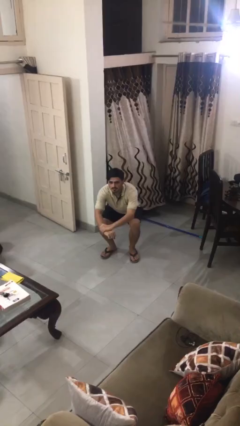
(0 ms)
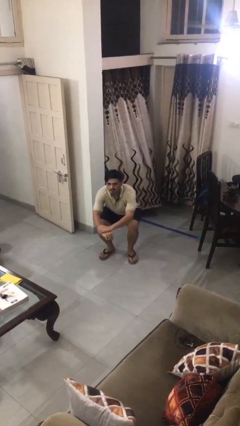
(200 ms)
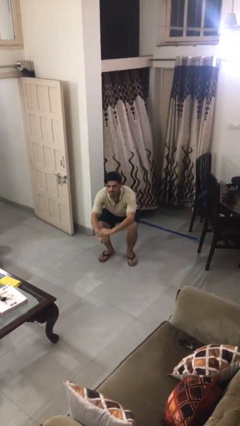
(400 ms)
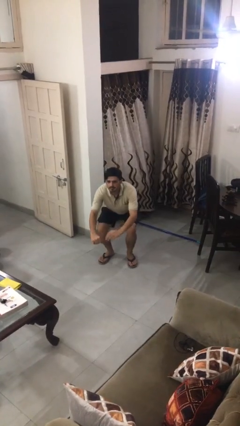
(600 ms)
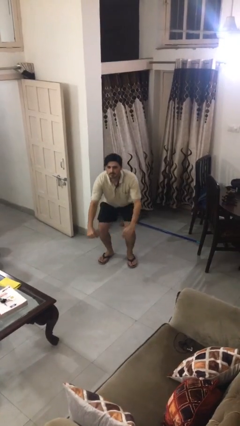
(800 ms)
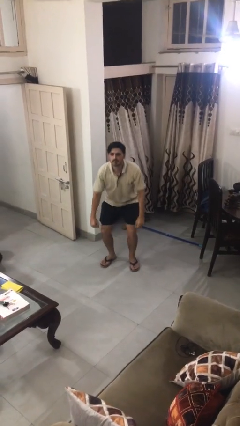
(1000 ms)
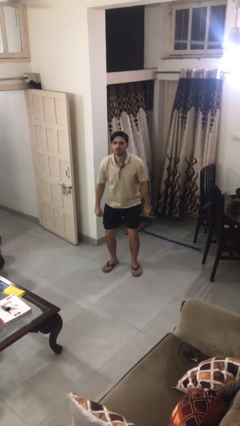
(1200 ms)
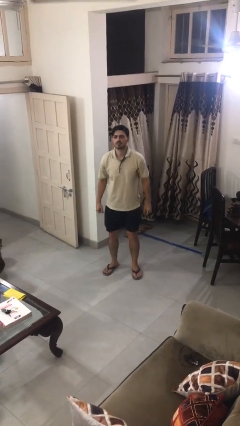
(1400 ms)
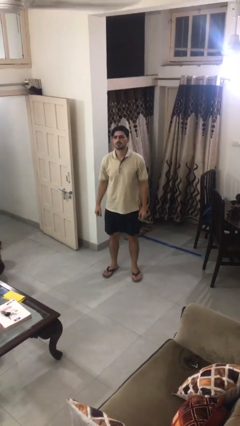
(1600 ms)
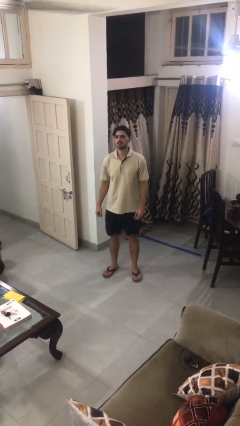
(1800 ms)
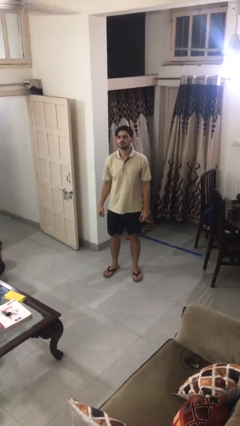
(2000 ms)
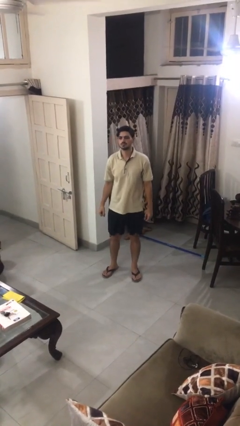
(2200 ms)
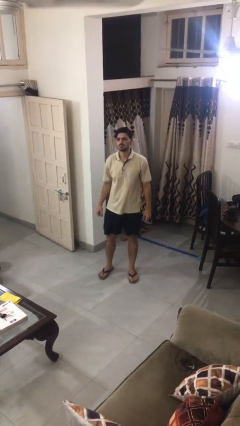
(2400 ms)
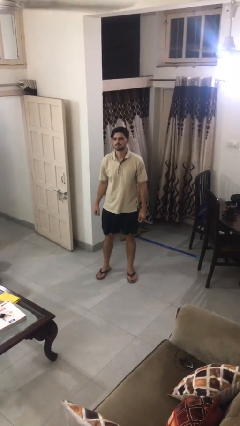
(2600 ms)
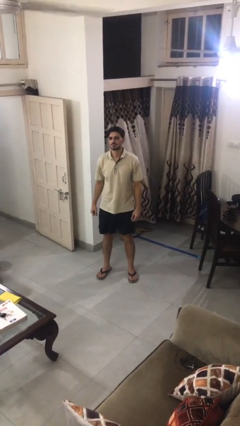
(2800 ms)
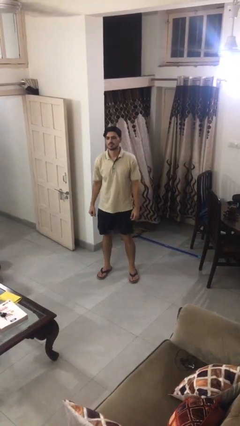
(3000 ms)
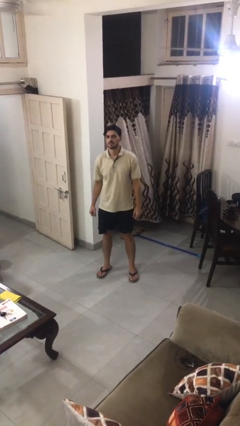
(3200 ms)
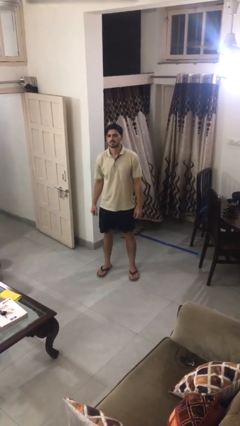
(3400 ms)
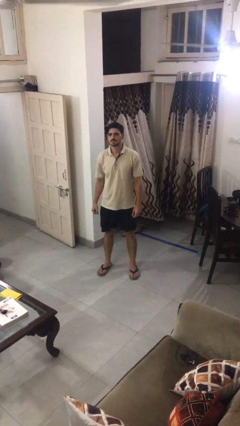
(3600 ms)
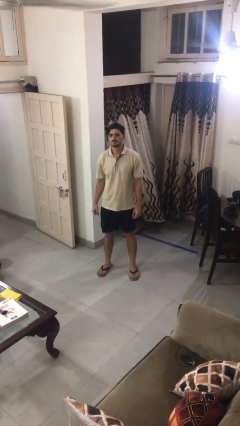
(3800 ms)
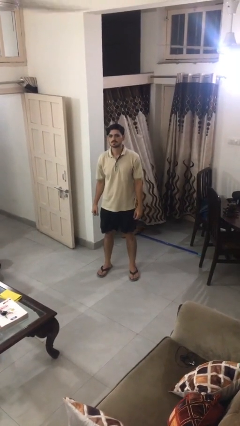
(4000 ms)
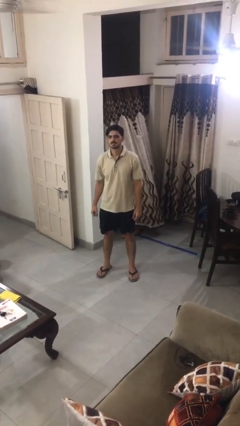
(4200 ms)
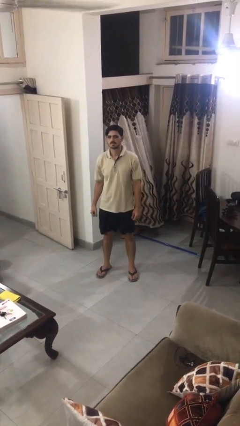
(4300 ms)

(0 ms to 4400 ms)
person stands up

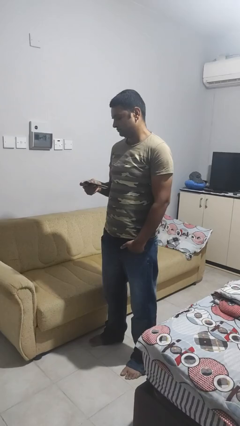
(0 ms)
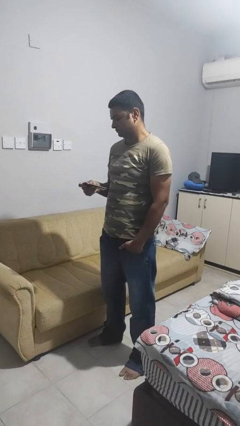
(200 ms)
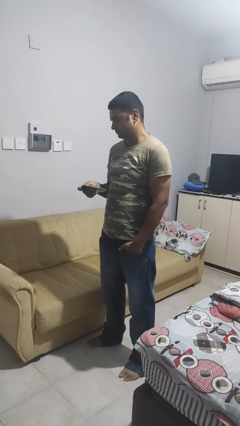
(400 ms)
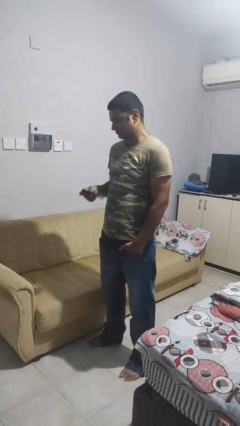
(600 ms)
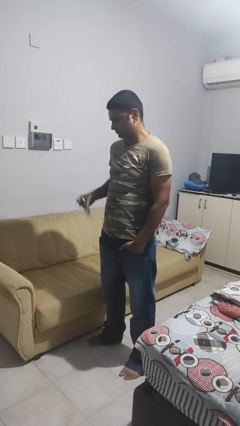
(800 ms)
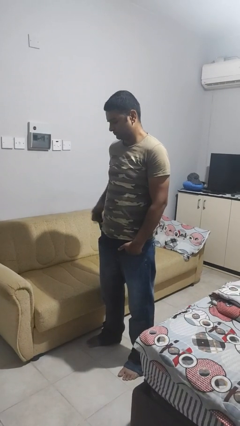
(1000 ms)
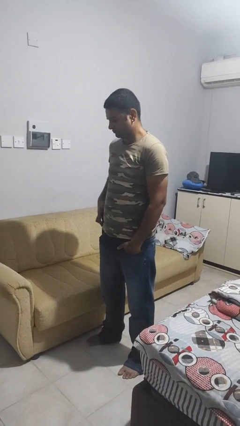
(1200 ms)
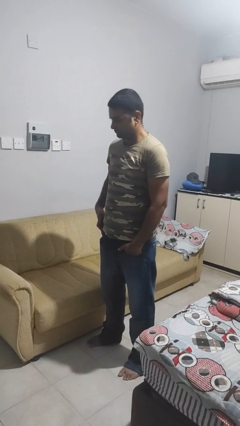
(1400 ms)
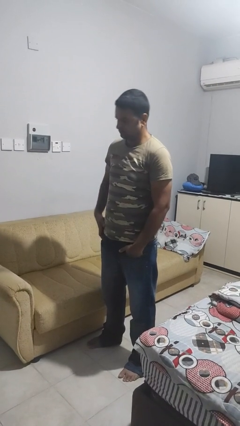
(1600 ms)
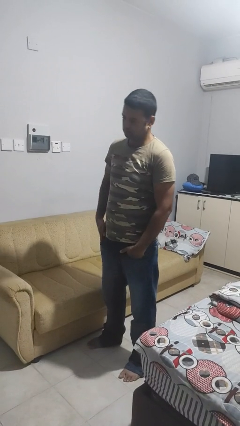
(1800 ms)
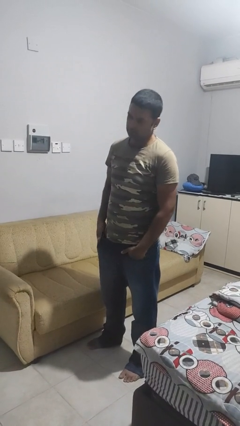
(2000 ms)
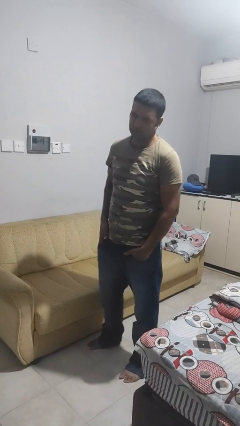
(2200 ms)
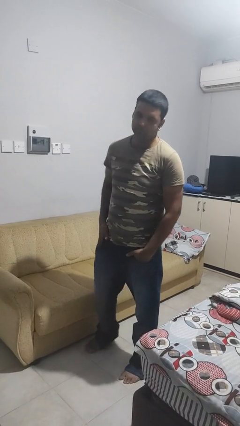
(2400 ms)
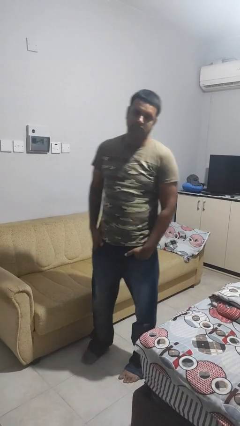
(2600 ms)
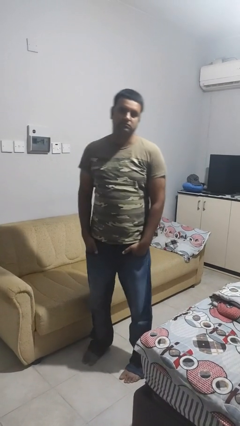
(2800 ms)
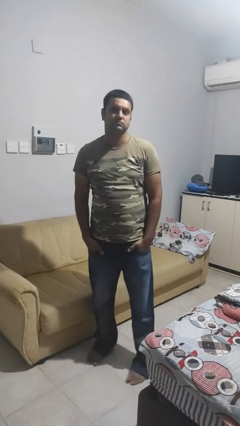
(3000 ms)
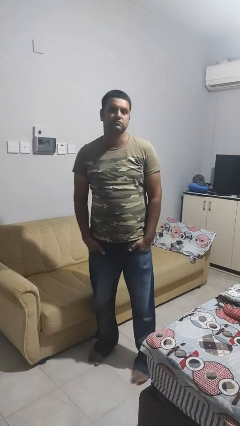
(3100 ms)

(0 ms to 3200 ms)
person puts phone into pocket

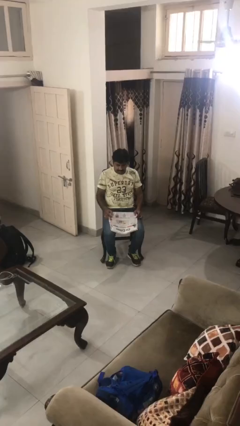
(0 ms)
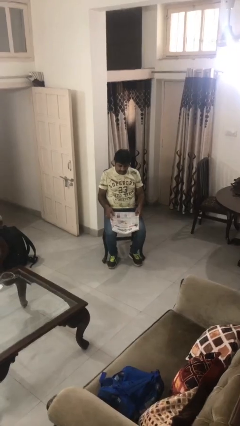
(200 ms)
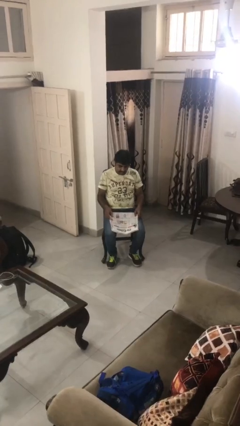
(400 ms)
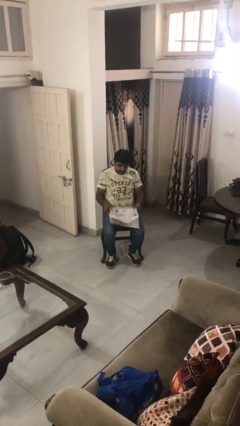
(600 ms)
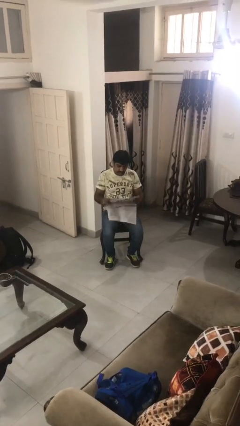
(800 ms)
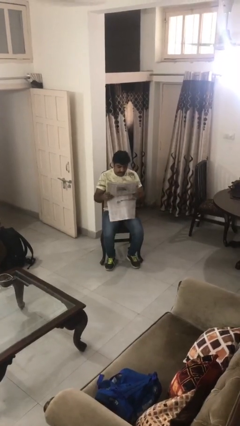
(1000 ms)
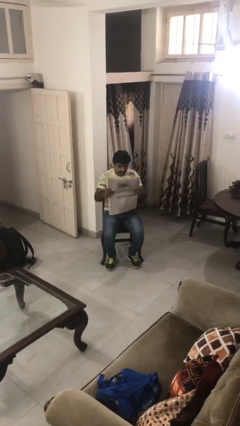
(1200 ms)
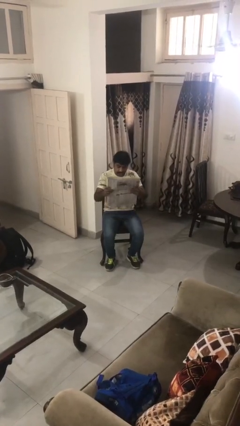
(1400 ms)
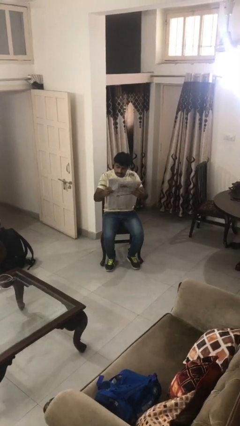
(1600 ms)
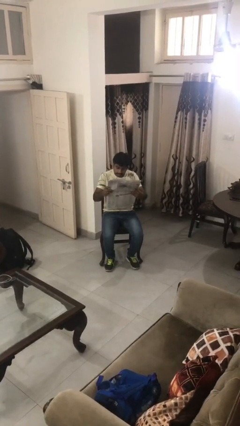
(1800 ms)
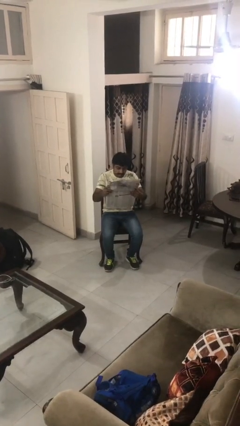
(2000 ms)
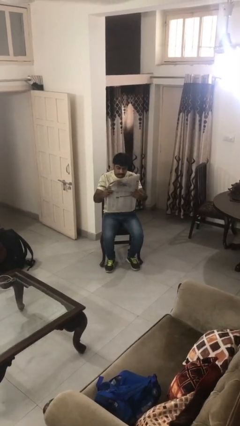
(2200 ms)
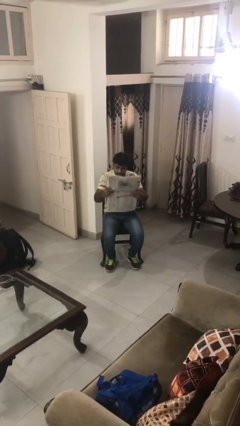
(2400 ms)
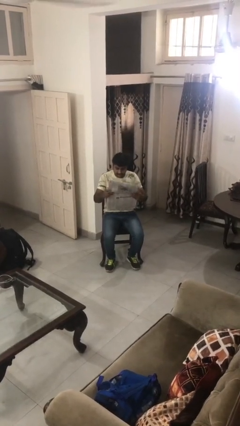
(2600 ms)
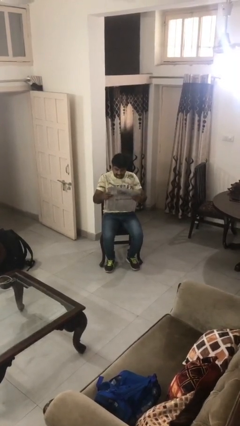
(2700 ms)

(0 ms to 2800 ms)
person reads newspaper

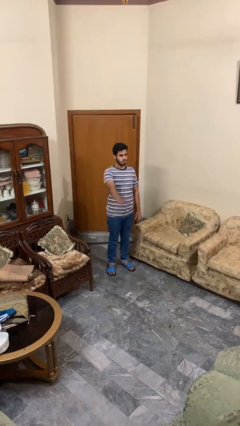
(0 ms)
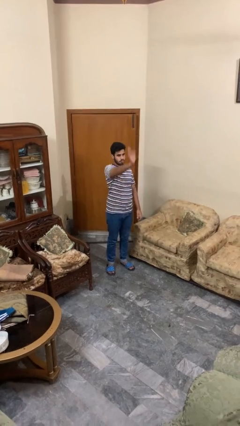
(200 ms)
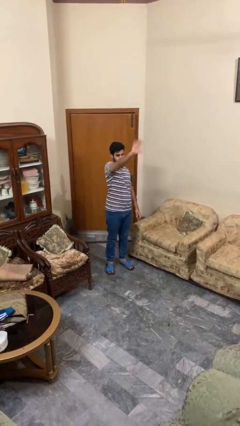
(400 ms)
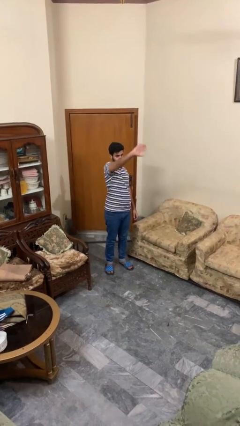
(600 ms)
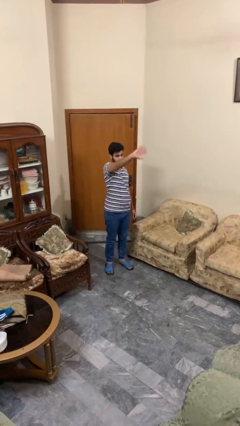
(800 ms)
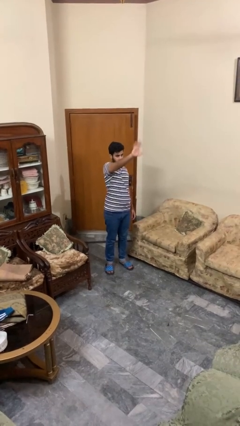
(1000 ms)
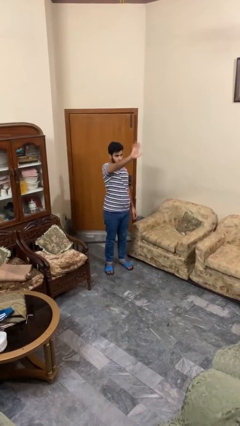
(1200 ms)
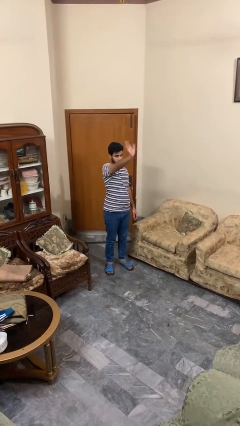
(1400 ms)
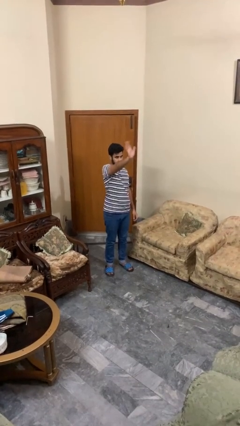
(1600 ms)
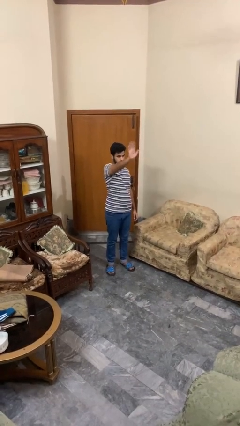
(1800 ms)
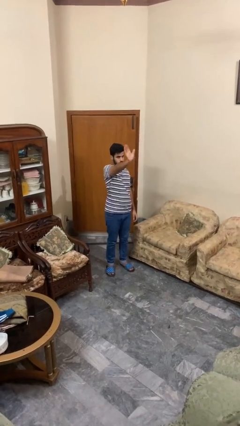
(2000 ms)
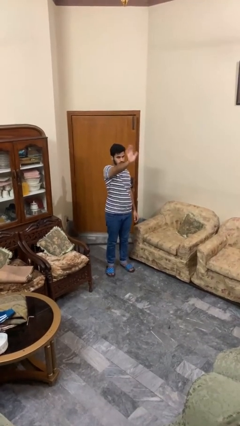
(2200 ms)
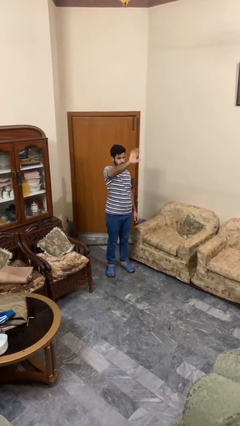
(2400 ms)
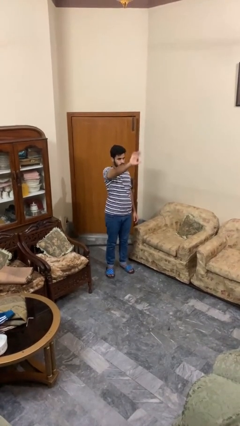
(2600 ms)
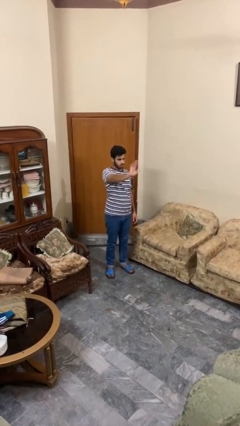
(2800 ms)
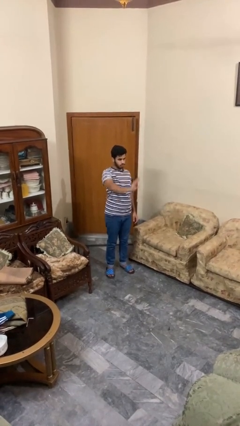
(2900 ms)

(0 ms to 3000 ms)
person waves at person

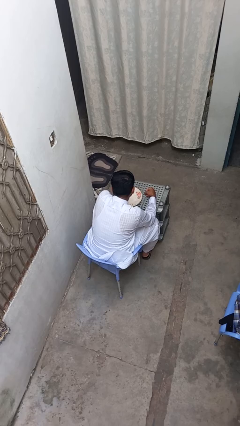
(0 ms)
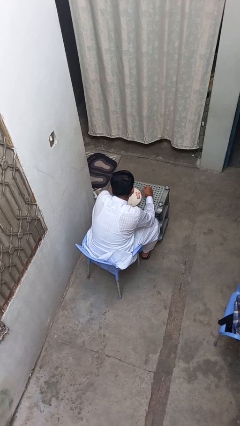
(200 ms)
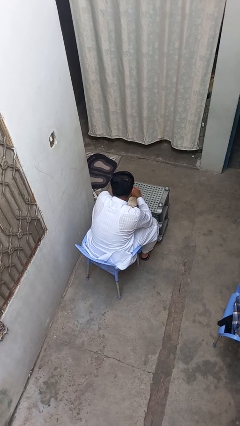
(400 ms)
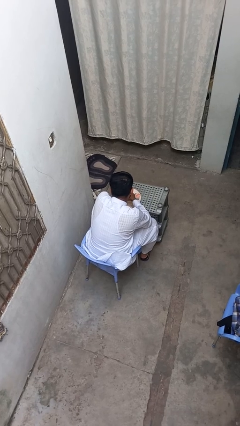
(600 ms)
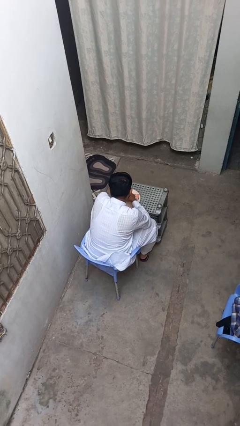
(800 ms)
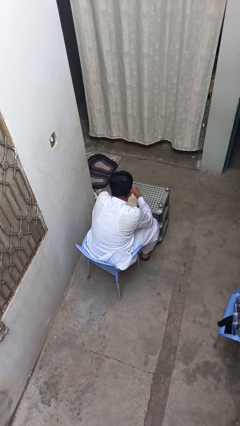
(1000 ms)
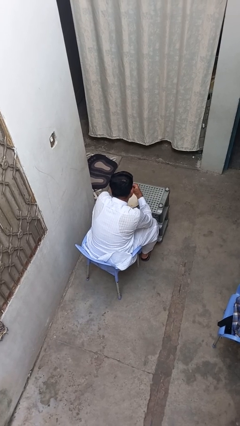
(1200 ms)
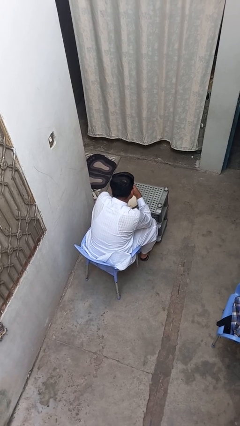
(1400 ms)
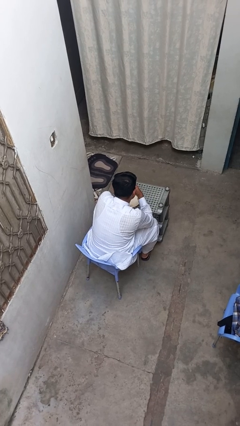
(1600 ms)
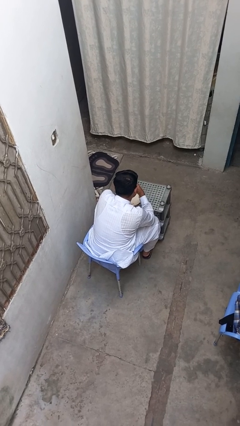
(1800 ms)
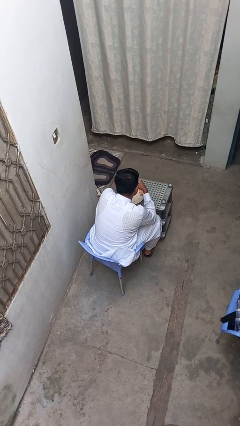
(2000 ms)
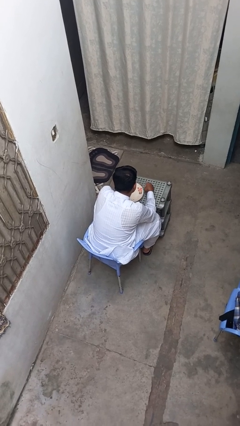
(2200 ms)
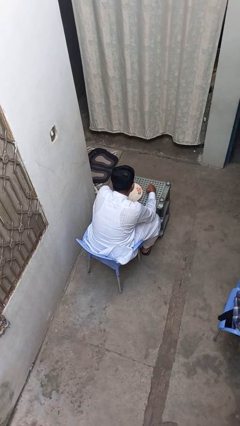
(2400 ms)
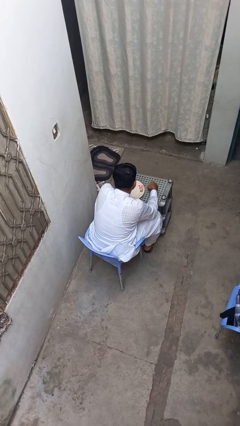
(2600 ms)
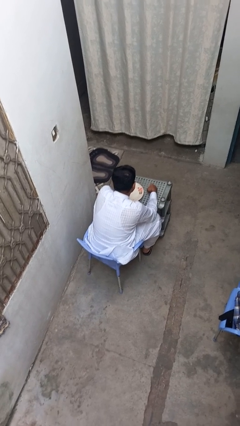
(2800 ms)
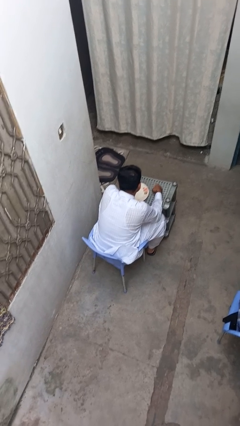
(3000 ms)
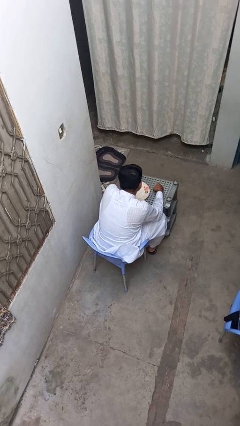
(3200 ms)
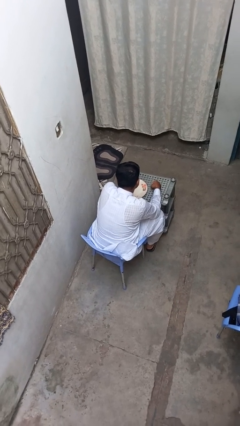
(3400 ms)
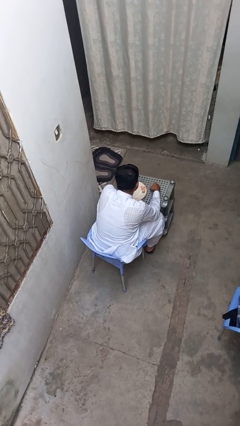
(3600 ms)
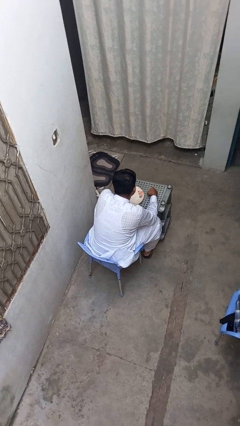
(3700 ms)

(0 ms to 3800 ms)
person eats with hands

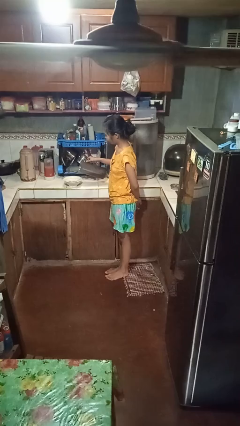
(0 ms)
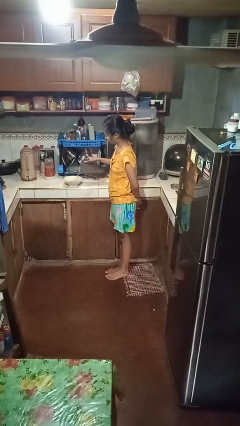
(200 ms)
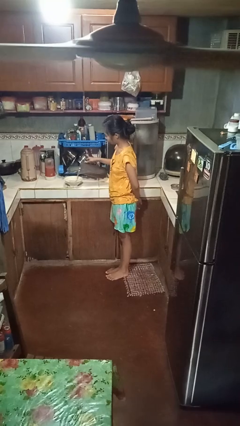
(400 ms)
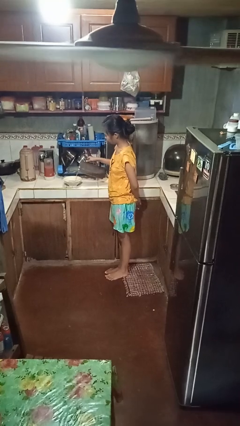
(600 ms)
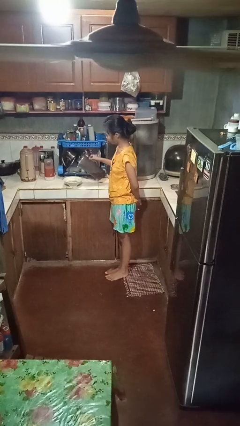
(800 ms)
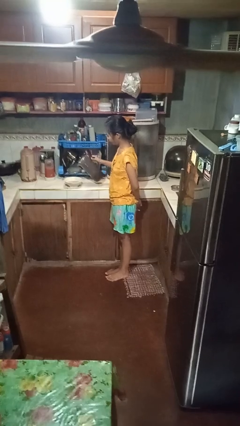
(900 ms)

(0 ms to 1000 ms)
person pours into bowl
